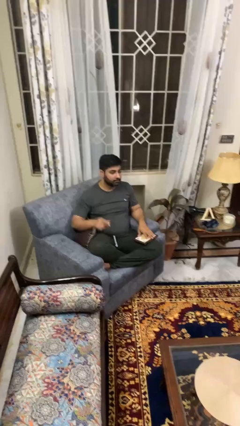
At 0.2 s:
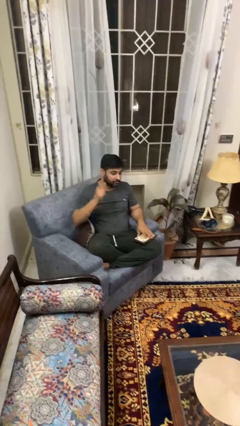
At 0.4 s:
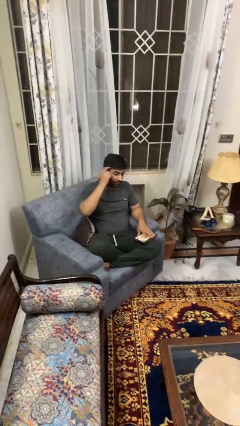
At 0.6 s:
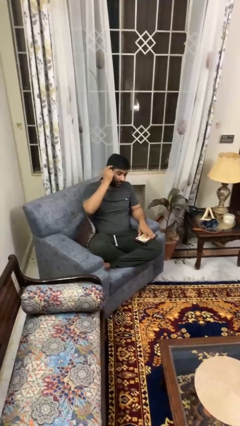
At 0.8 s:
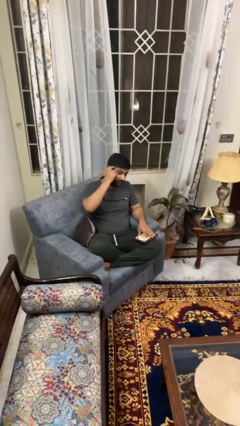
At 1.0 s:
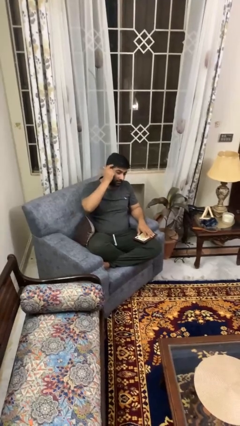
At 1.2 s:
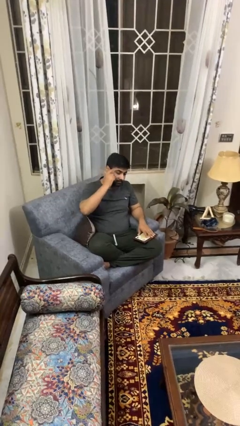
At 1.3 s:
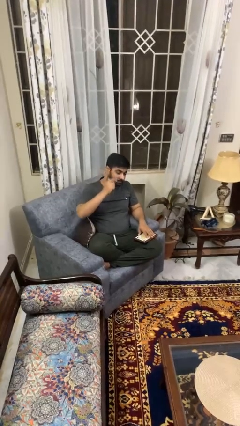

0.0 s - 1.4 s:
person pats head

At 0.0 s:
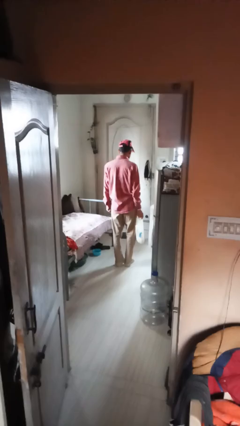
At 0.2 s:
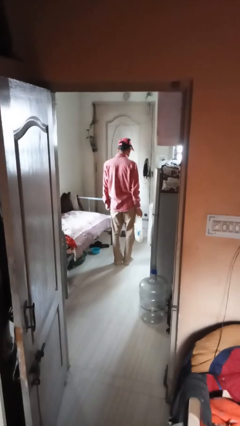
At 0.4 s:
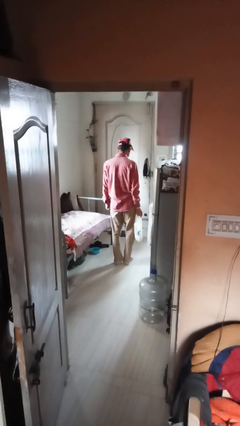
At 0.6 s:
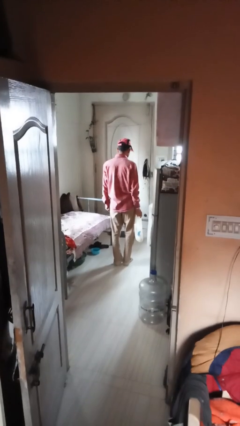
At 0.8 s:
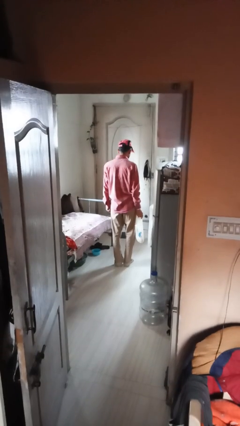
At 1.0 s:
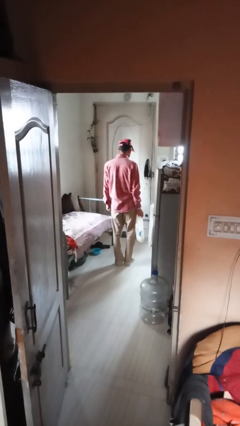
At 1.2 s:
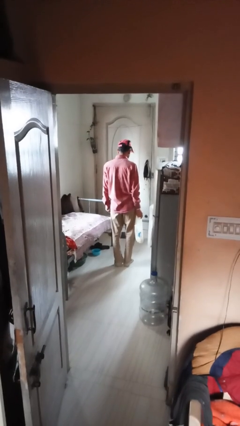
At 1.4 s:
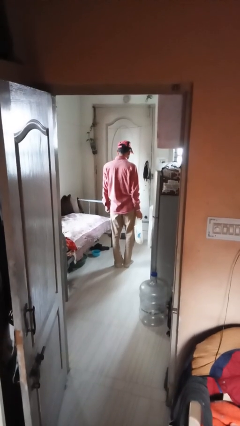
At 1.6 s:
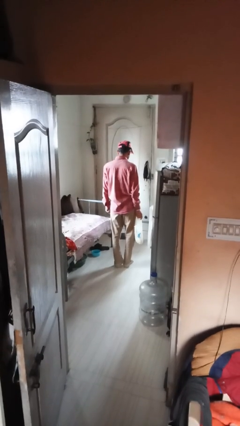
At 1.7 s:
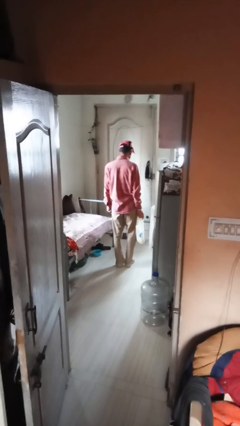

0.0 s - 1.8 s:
person carries groceries

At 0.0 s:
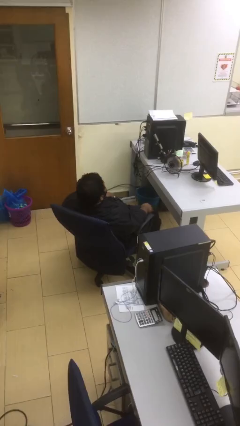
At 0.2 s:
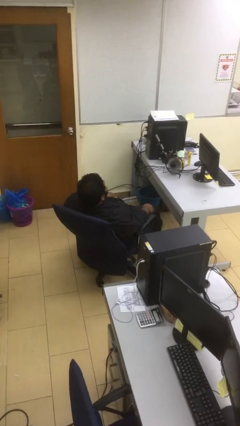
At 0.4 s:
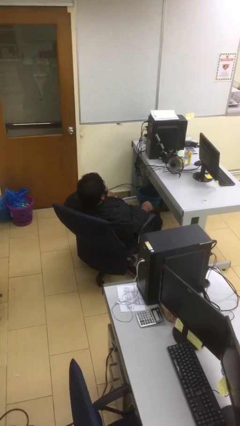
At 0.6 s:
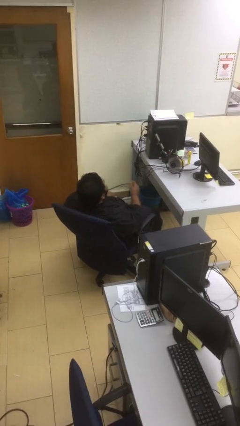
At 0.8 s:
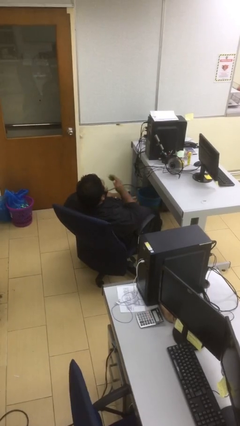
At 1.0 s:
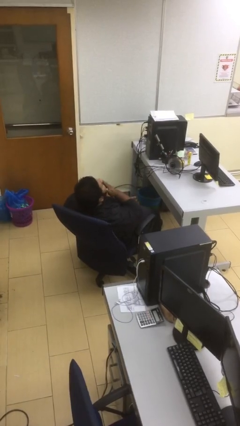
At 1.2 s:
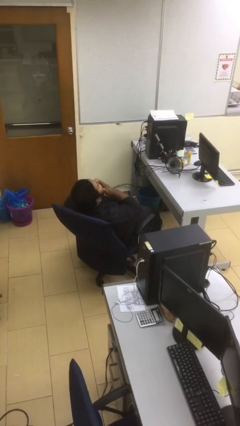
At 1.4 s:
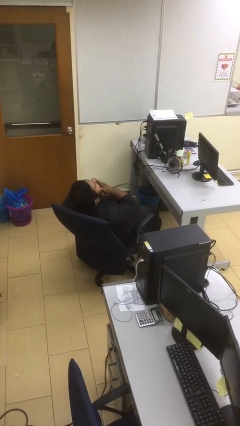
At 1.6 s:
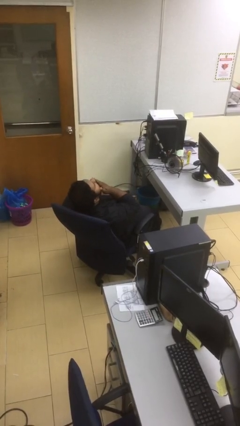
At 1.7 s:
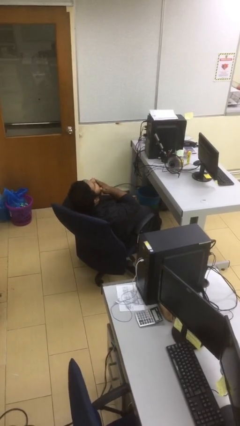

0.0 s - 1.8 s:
person yawns

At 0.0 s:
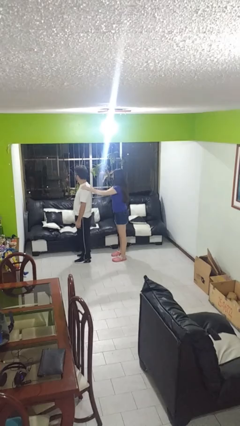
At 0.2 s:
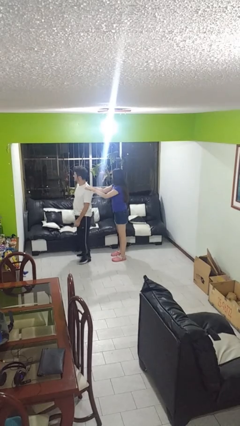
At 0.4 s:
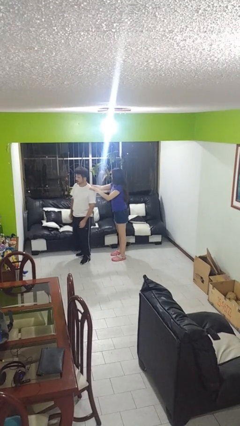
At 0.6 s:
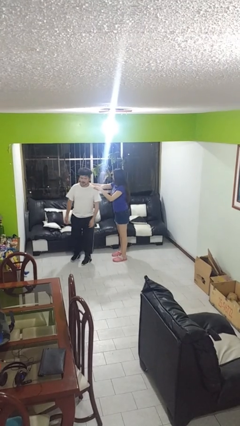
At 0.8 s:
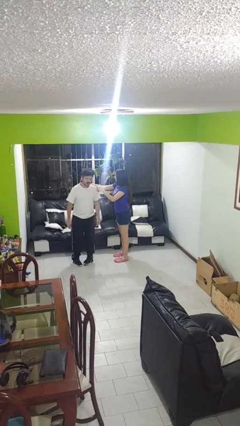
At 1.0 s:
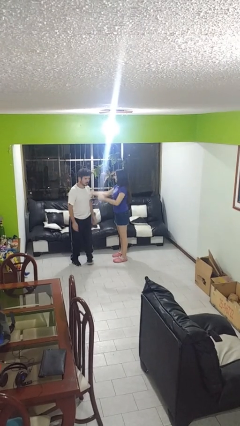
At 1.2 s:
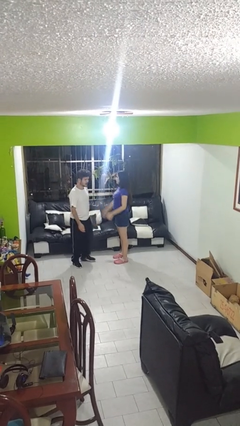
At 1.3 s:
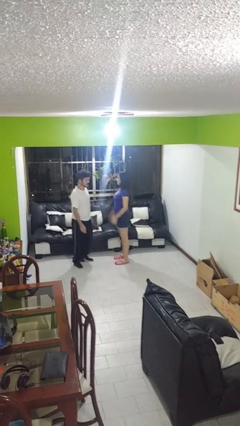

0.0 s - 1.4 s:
person spins person around

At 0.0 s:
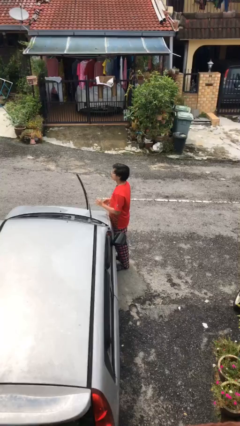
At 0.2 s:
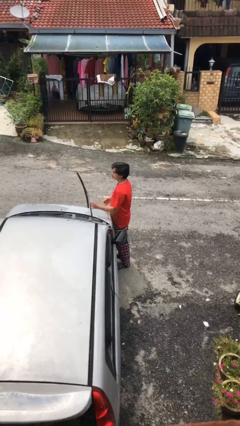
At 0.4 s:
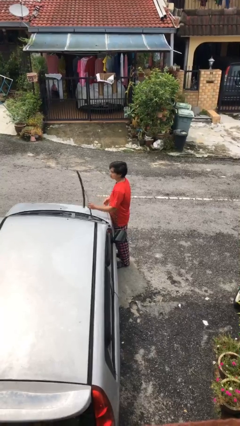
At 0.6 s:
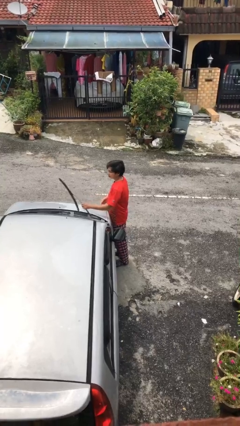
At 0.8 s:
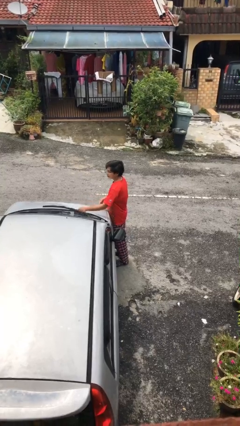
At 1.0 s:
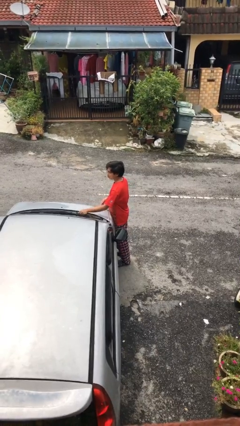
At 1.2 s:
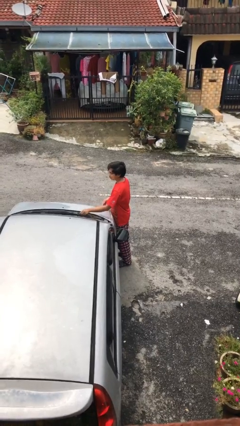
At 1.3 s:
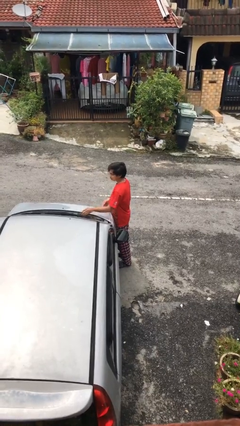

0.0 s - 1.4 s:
person flips down car wipers

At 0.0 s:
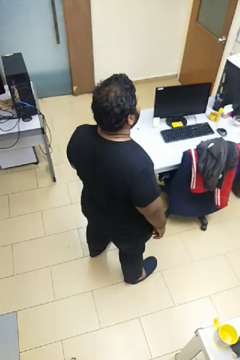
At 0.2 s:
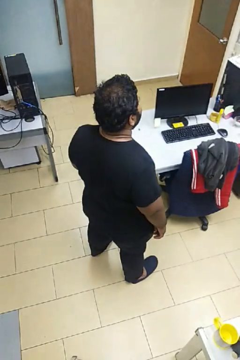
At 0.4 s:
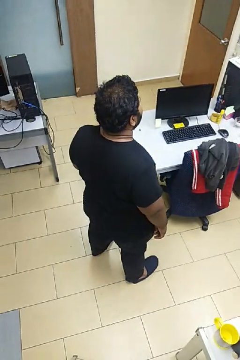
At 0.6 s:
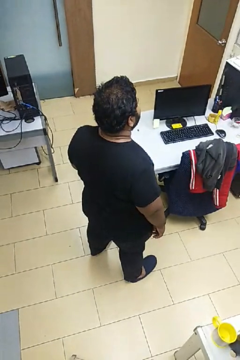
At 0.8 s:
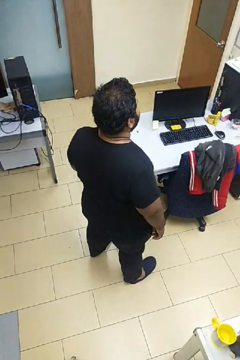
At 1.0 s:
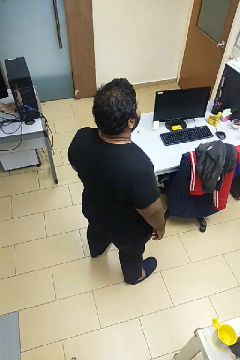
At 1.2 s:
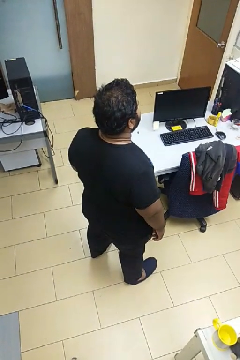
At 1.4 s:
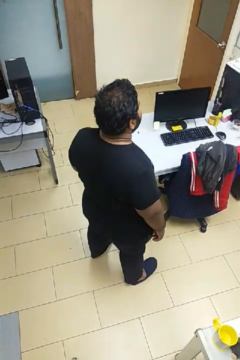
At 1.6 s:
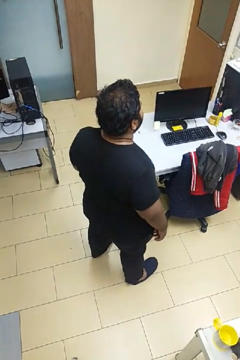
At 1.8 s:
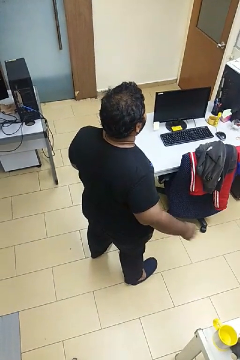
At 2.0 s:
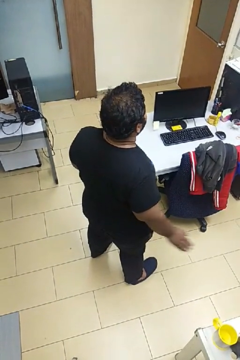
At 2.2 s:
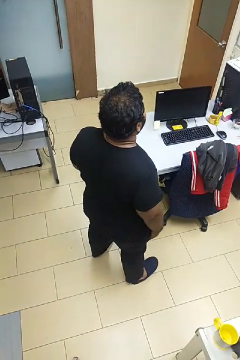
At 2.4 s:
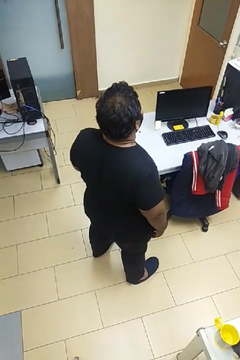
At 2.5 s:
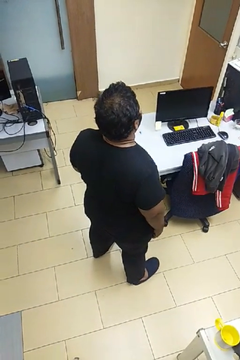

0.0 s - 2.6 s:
person slaps hands on thighs

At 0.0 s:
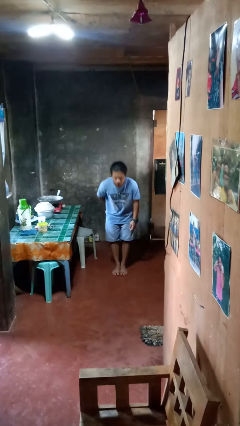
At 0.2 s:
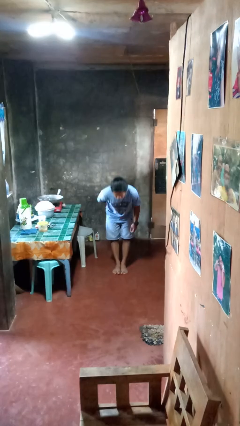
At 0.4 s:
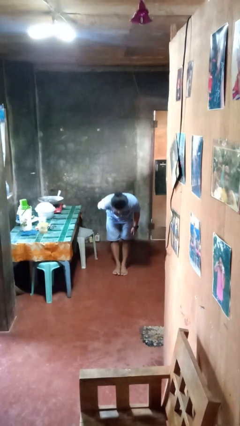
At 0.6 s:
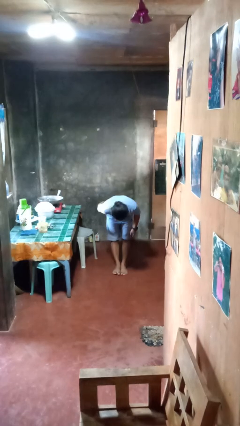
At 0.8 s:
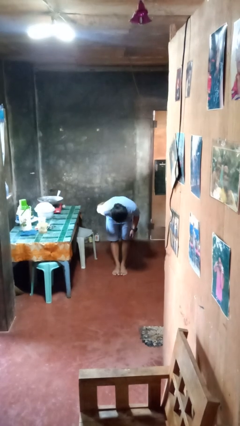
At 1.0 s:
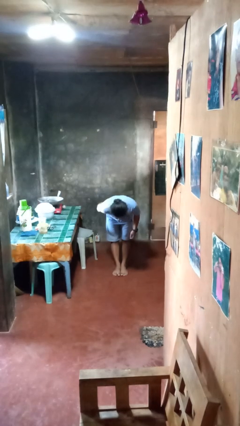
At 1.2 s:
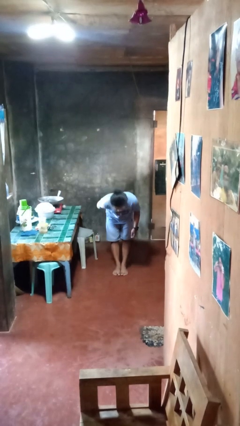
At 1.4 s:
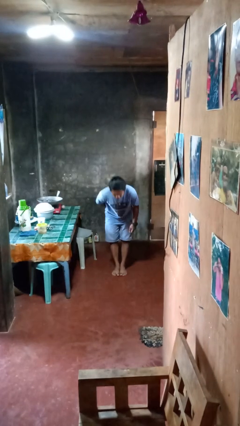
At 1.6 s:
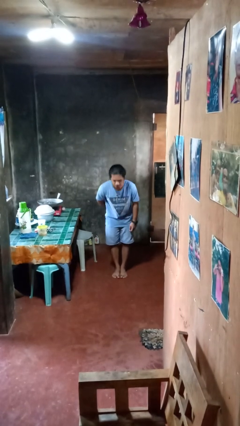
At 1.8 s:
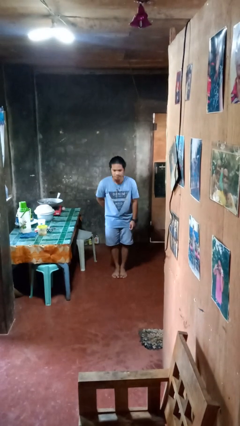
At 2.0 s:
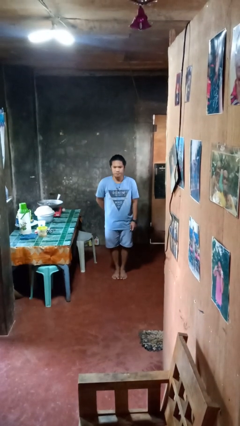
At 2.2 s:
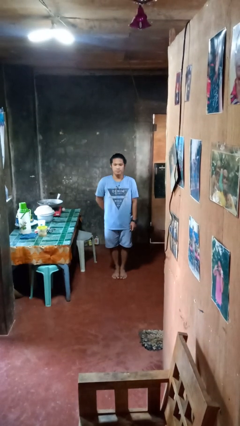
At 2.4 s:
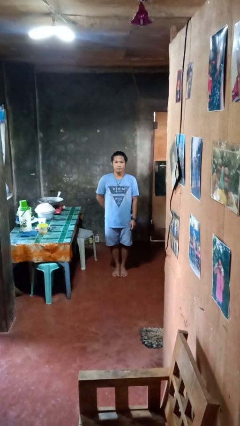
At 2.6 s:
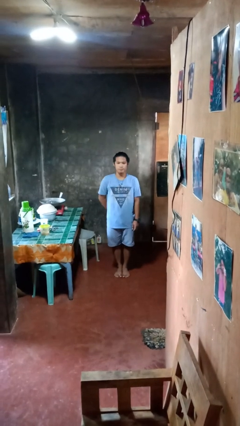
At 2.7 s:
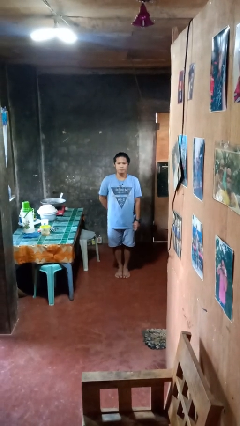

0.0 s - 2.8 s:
person bows

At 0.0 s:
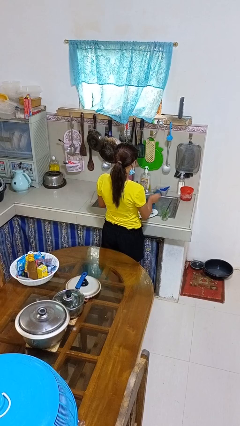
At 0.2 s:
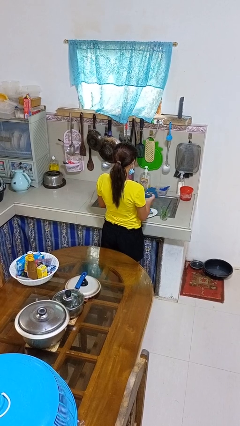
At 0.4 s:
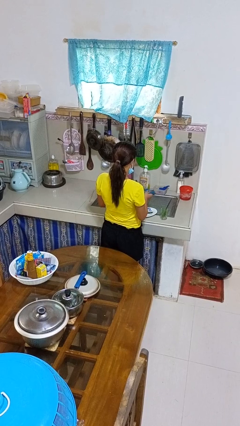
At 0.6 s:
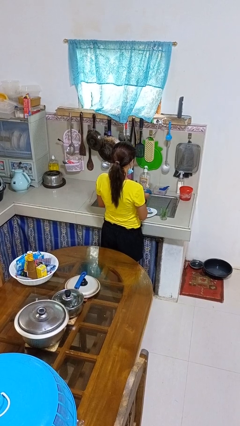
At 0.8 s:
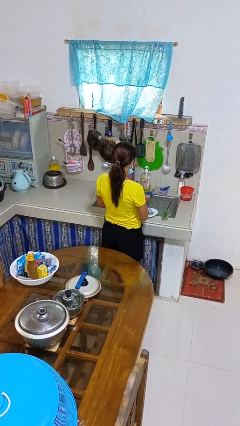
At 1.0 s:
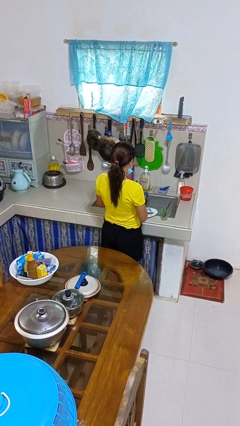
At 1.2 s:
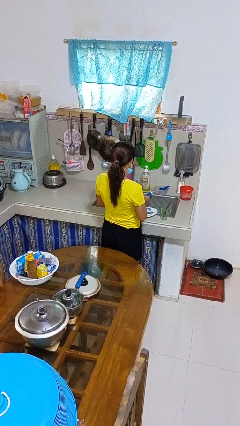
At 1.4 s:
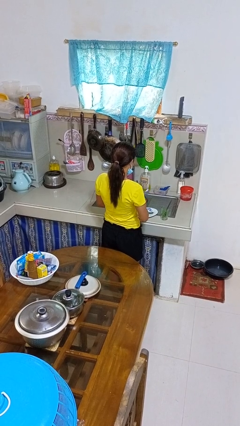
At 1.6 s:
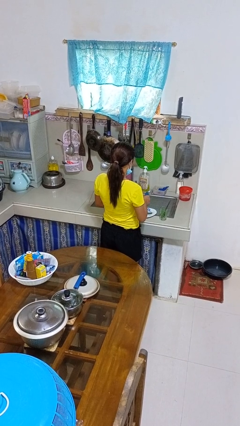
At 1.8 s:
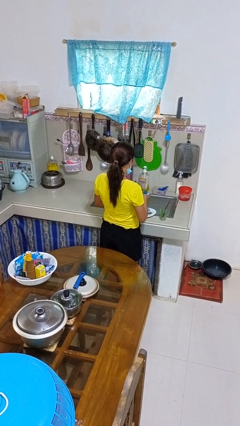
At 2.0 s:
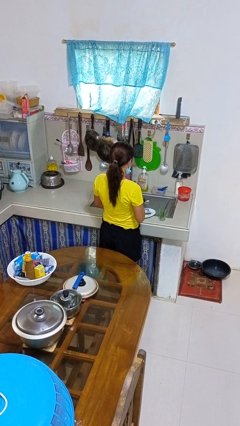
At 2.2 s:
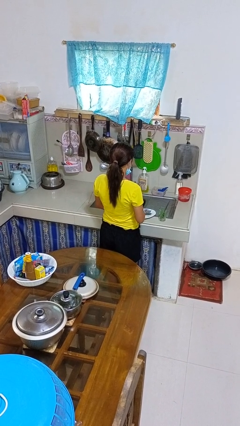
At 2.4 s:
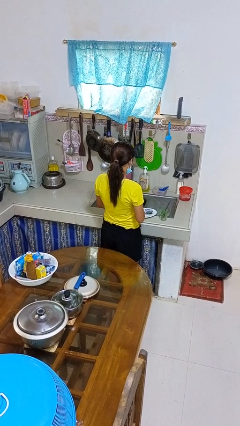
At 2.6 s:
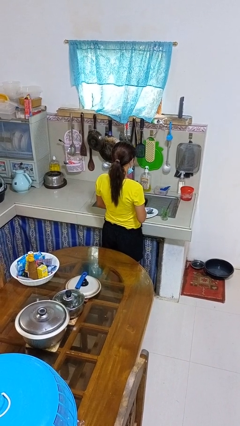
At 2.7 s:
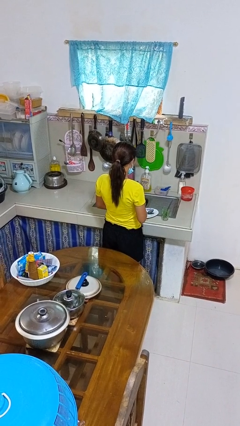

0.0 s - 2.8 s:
person dries dish

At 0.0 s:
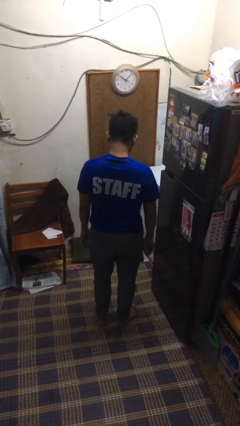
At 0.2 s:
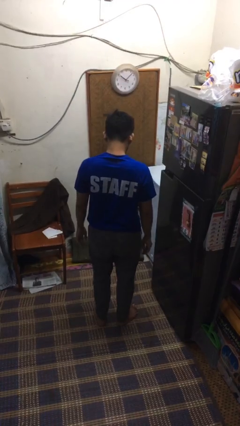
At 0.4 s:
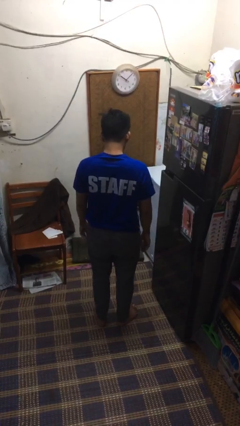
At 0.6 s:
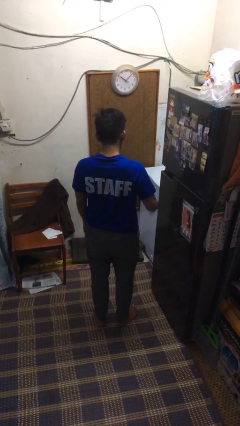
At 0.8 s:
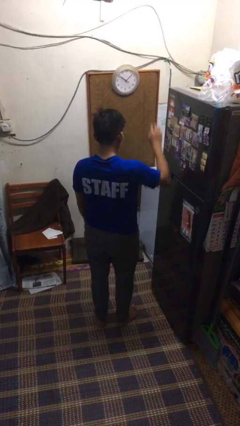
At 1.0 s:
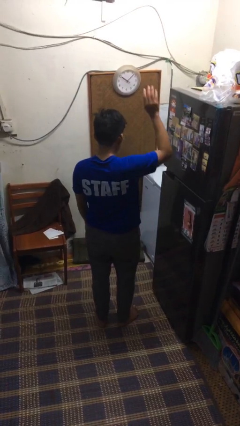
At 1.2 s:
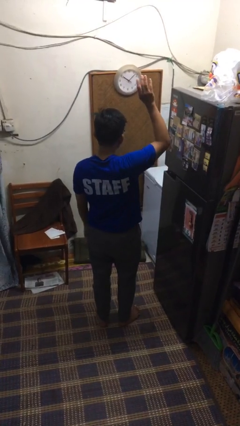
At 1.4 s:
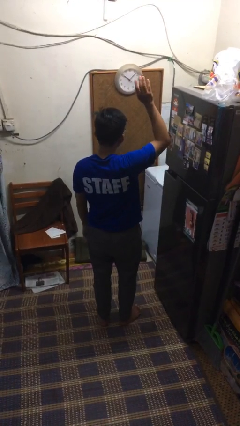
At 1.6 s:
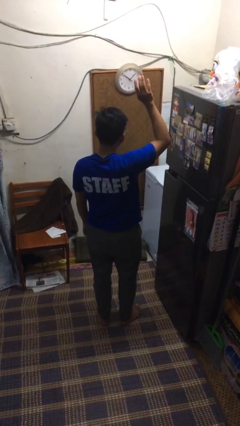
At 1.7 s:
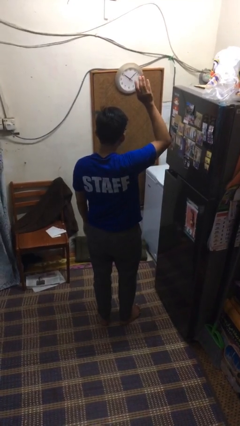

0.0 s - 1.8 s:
person gestures raise hand
